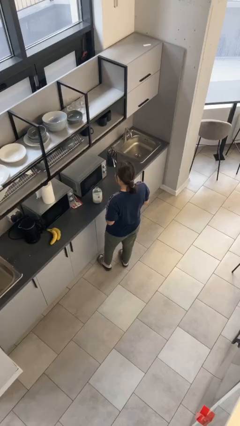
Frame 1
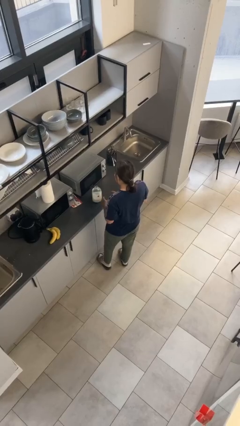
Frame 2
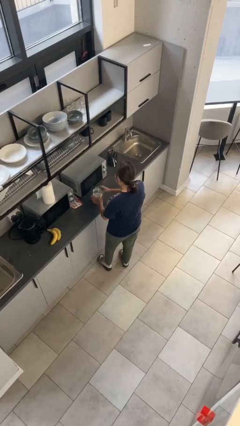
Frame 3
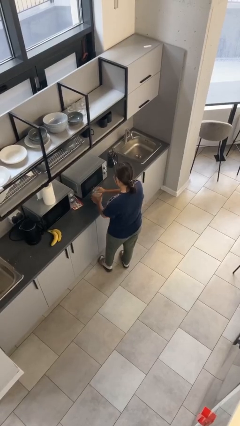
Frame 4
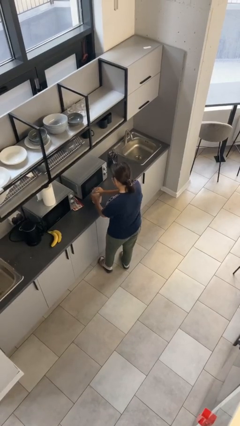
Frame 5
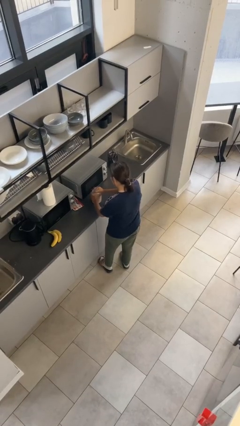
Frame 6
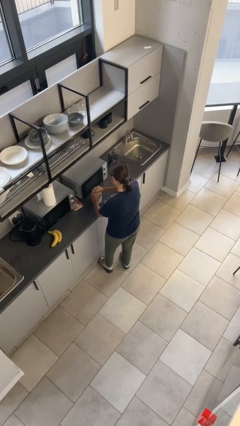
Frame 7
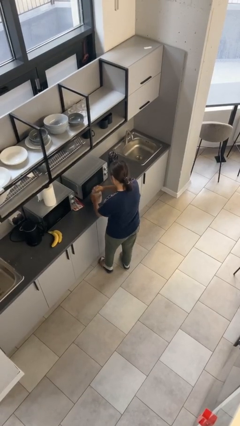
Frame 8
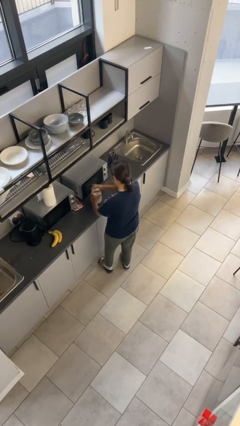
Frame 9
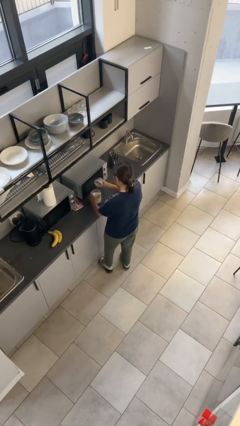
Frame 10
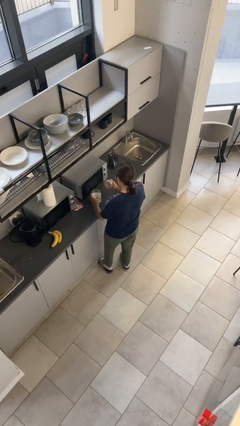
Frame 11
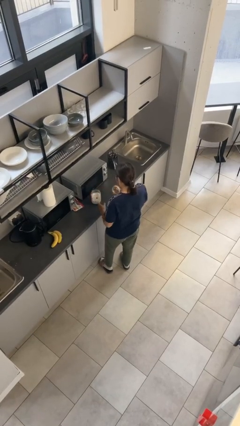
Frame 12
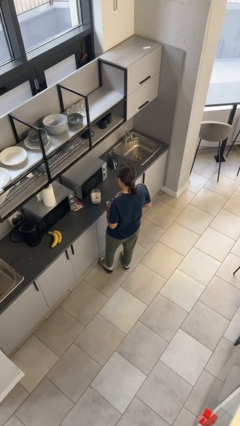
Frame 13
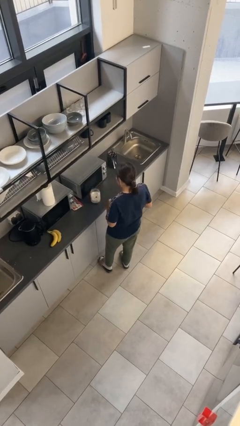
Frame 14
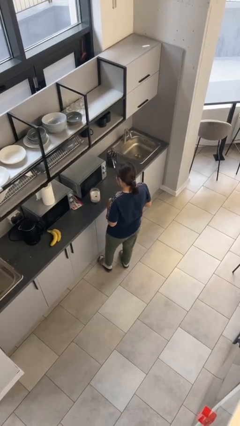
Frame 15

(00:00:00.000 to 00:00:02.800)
person opens jar

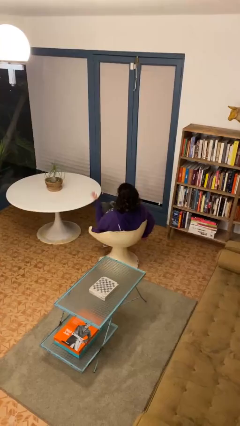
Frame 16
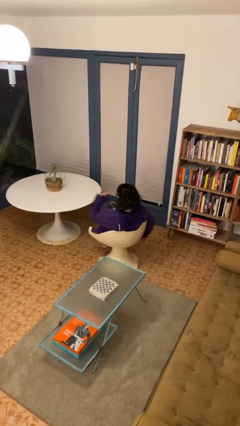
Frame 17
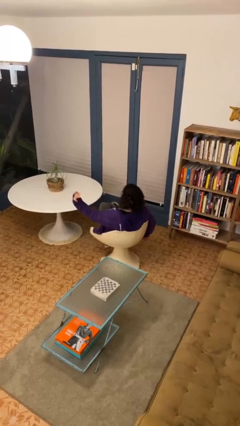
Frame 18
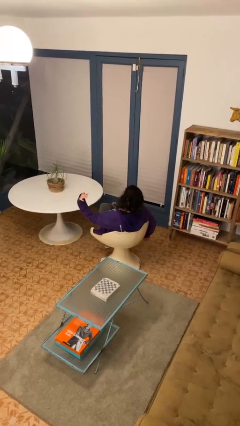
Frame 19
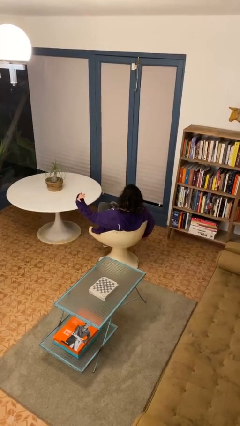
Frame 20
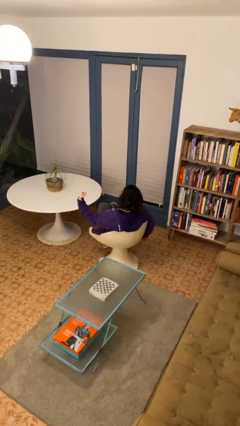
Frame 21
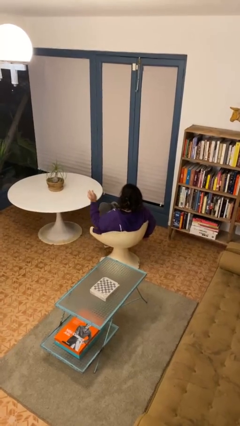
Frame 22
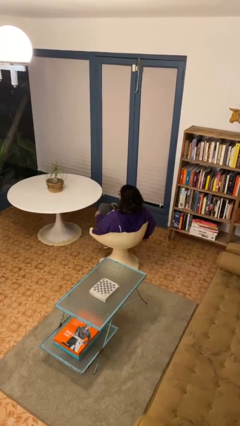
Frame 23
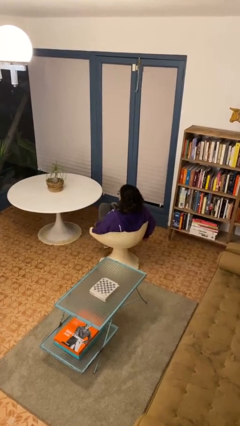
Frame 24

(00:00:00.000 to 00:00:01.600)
person gestures stop

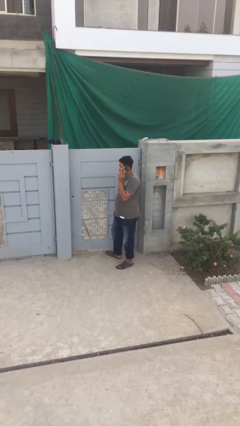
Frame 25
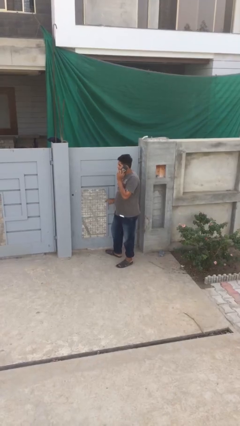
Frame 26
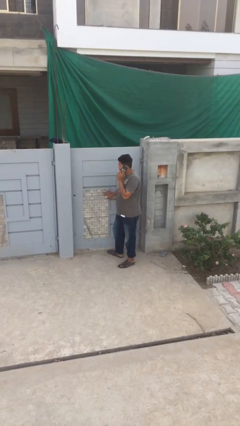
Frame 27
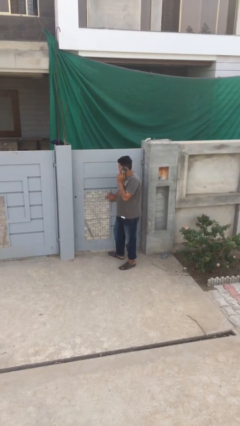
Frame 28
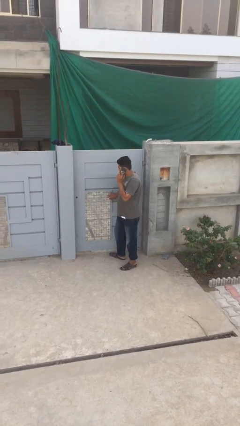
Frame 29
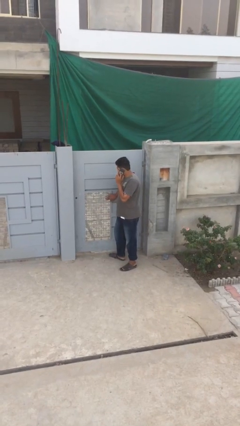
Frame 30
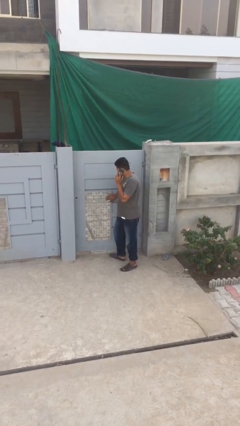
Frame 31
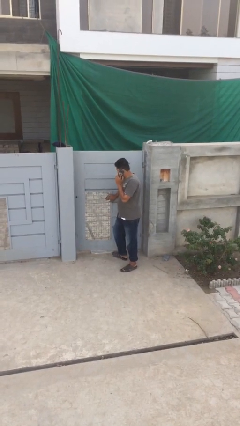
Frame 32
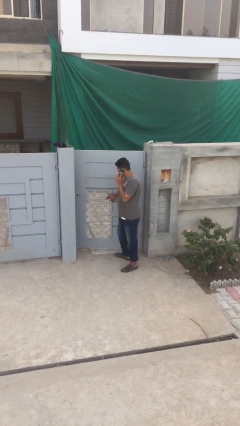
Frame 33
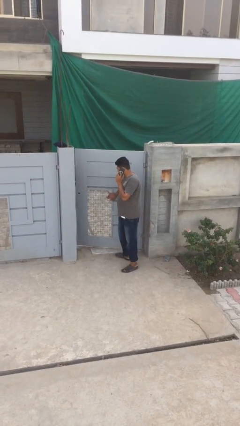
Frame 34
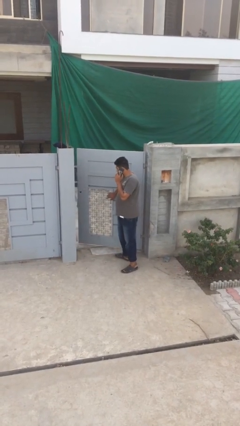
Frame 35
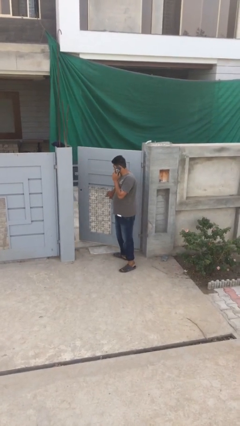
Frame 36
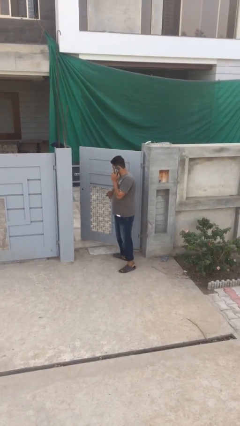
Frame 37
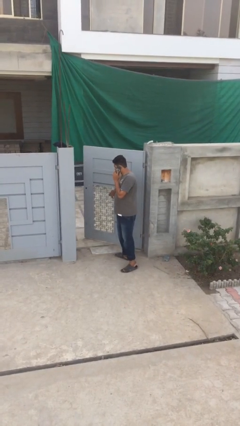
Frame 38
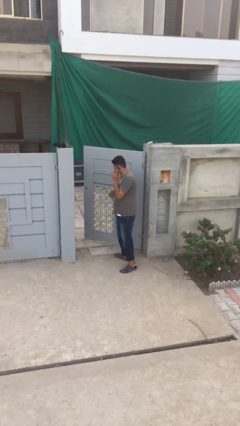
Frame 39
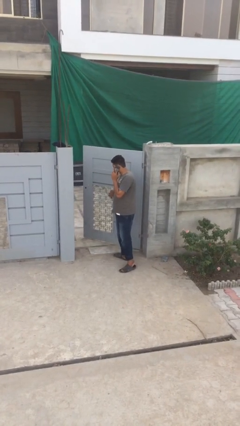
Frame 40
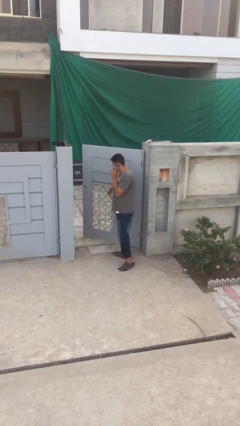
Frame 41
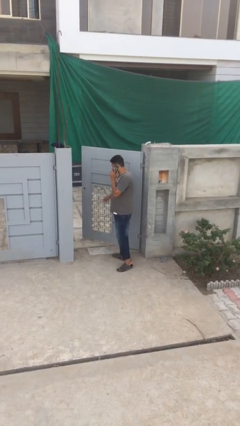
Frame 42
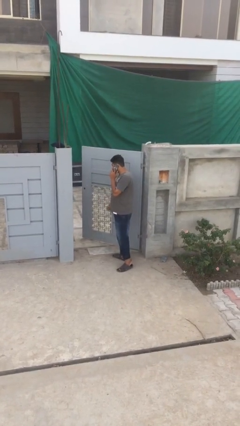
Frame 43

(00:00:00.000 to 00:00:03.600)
person opens facility door

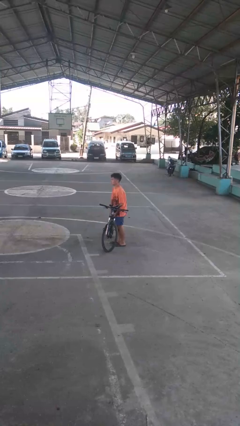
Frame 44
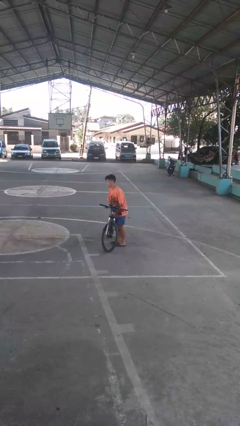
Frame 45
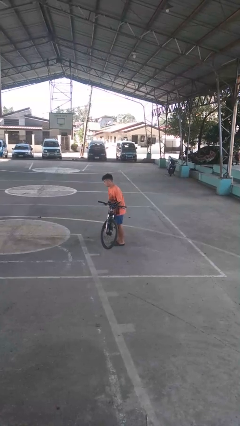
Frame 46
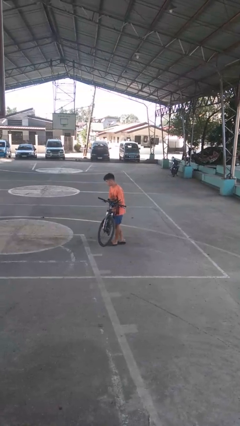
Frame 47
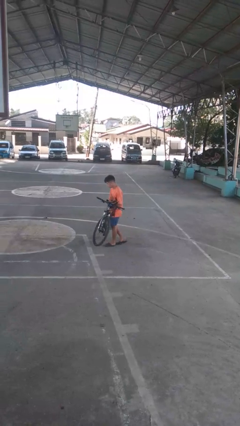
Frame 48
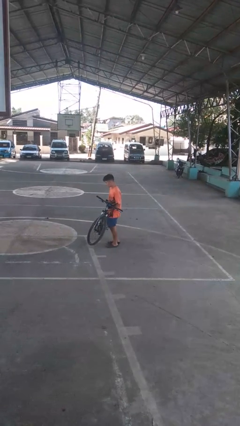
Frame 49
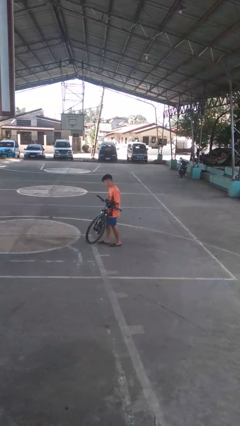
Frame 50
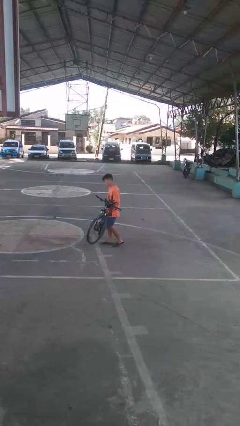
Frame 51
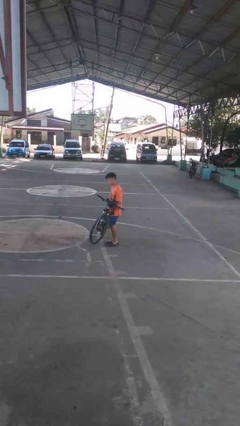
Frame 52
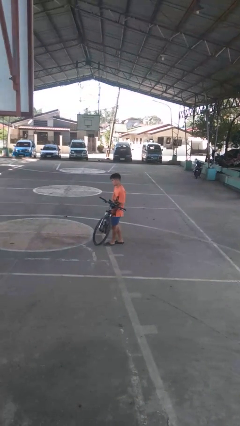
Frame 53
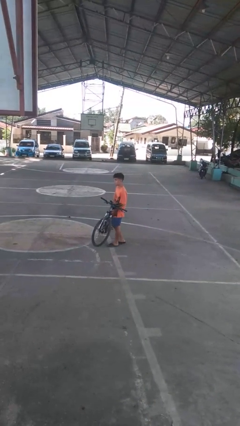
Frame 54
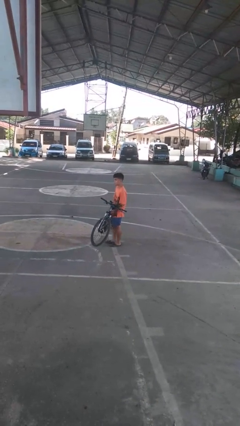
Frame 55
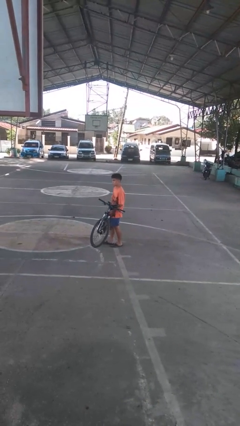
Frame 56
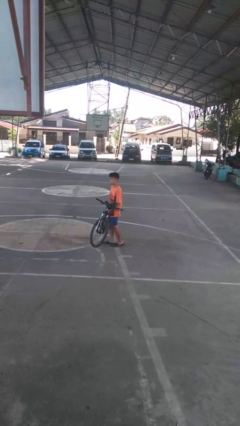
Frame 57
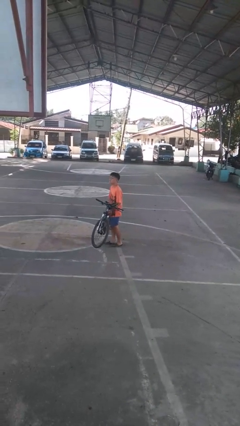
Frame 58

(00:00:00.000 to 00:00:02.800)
person carries bicycle

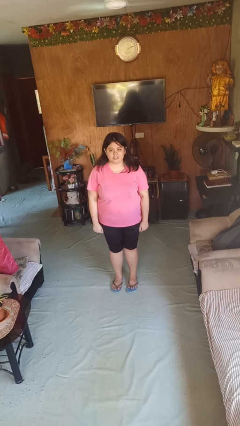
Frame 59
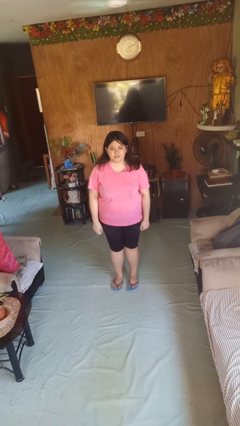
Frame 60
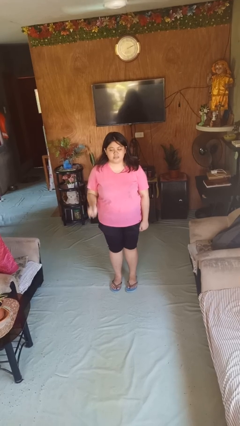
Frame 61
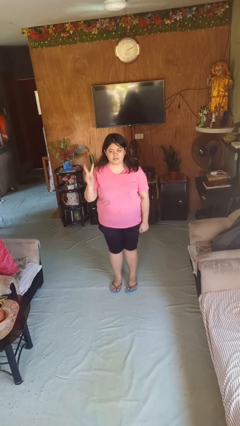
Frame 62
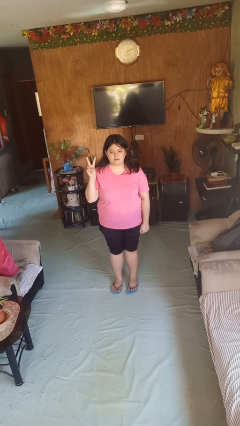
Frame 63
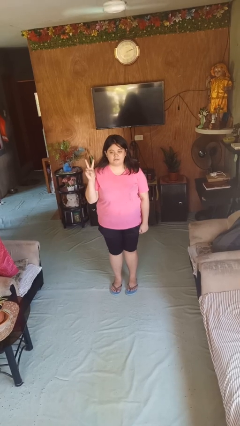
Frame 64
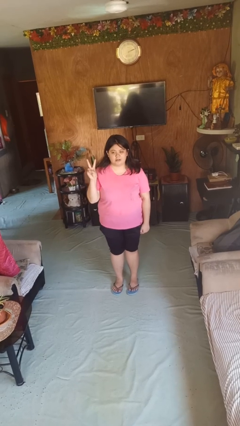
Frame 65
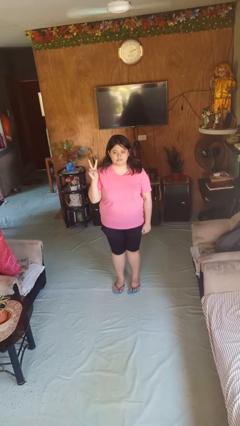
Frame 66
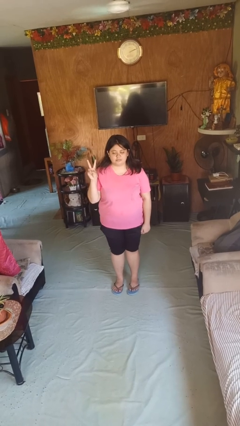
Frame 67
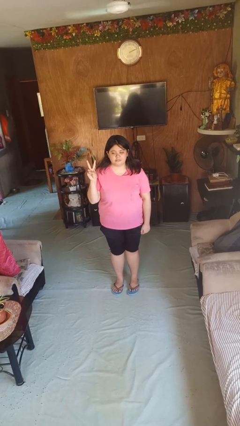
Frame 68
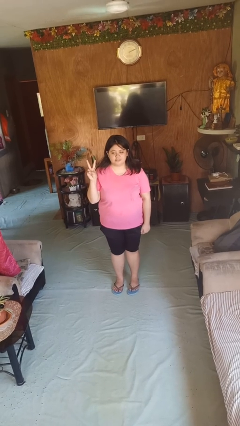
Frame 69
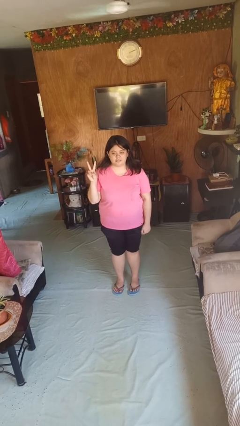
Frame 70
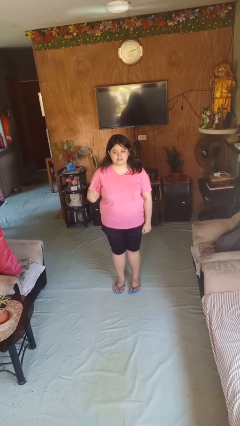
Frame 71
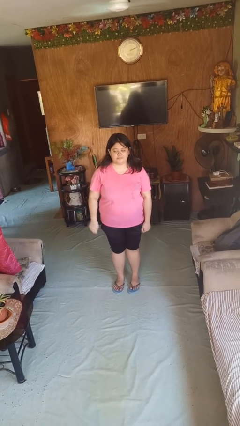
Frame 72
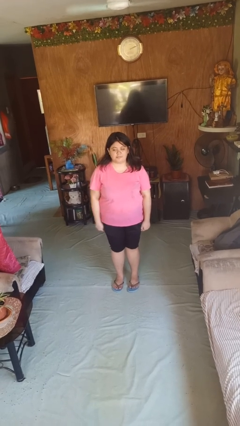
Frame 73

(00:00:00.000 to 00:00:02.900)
person gestures peace

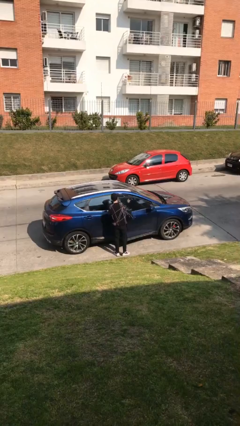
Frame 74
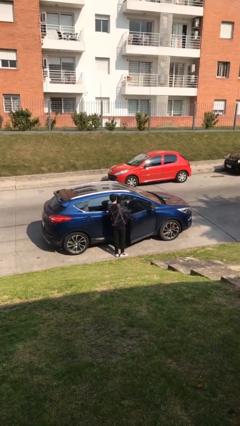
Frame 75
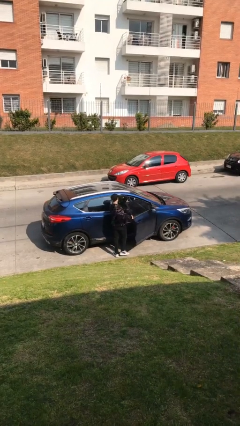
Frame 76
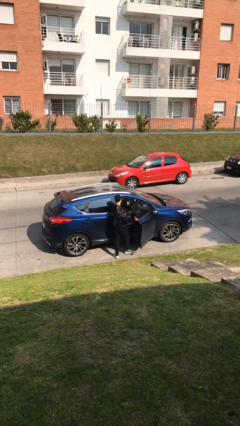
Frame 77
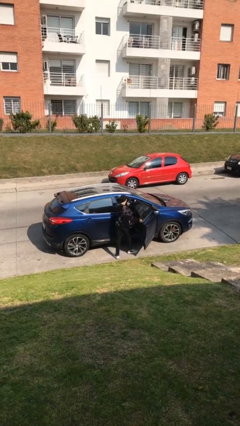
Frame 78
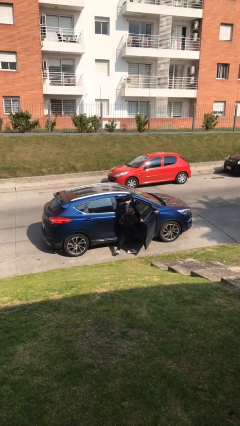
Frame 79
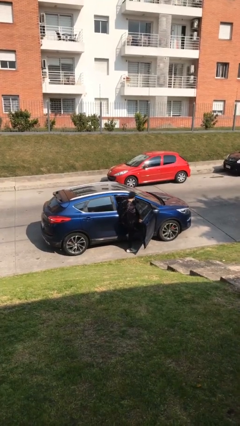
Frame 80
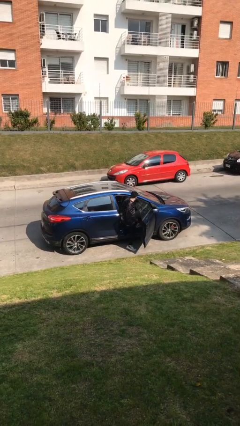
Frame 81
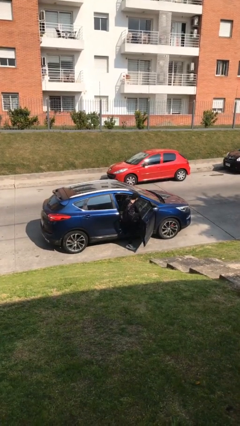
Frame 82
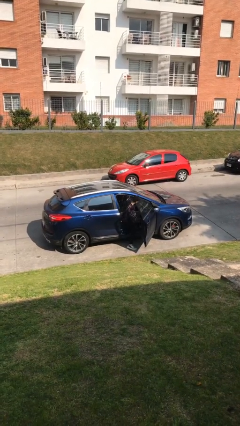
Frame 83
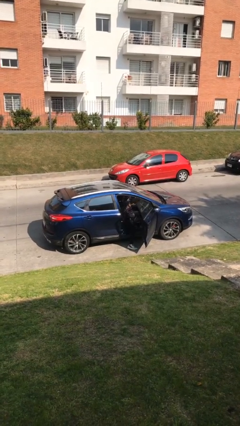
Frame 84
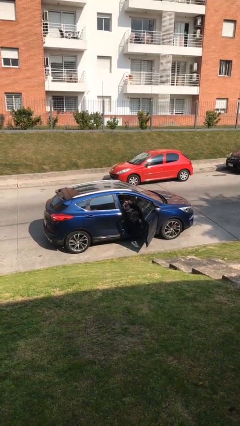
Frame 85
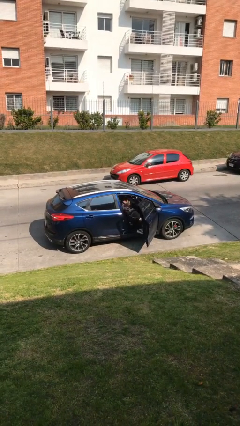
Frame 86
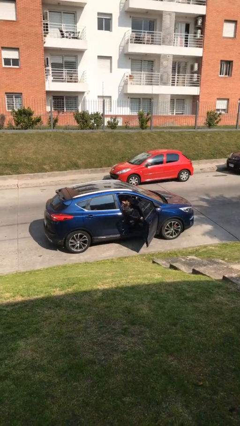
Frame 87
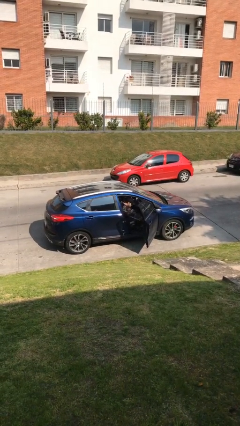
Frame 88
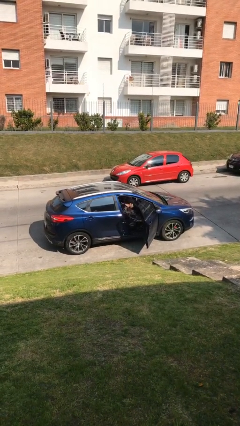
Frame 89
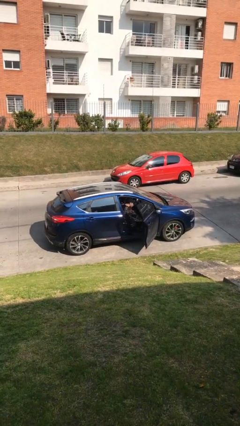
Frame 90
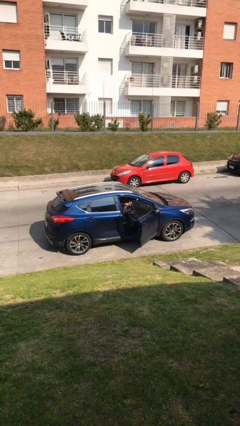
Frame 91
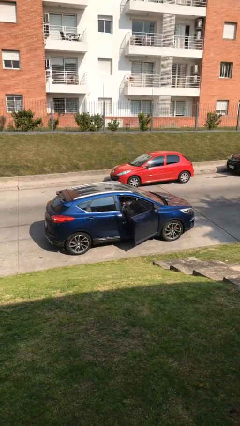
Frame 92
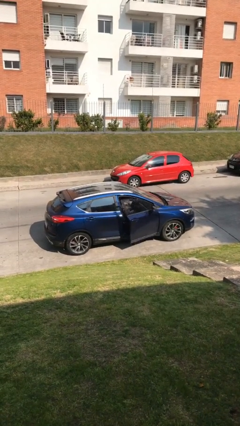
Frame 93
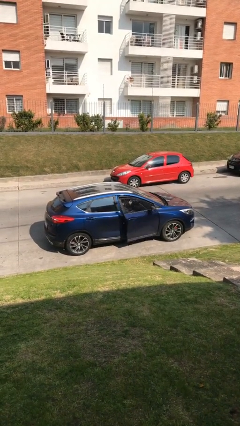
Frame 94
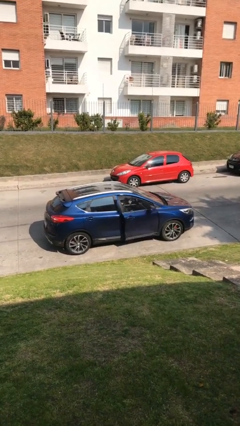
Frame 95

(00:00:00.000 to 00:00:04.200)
car picks up person
